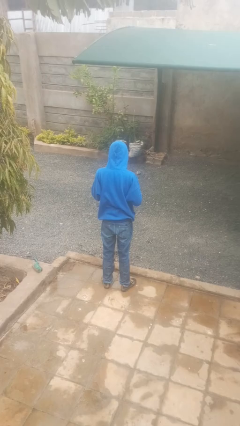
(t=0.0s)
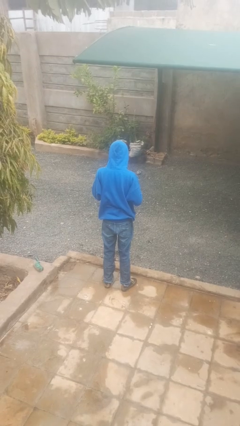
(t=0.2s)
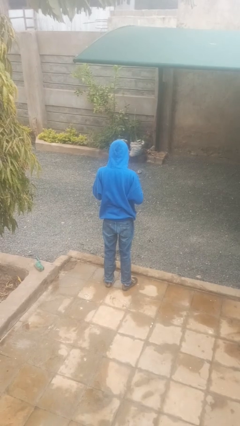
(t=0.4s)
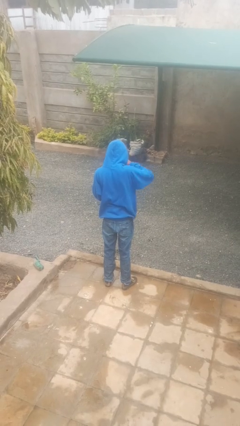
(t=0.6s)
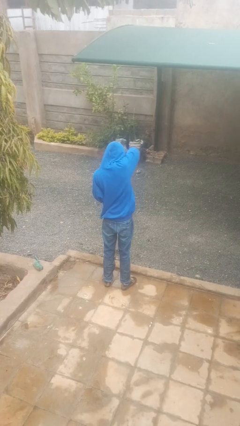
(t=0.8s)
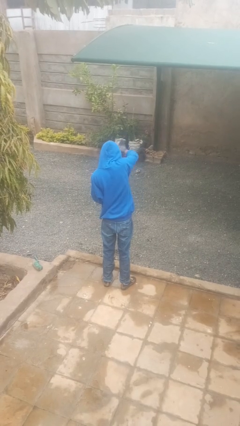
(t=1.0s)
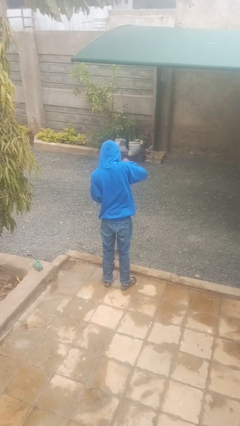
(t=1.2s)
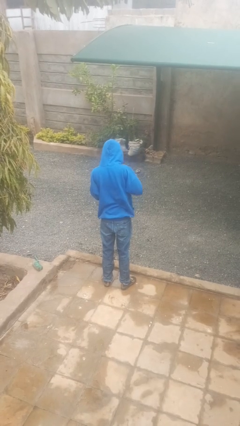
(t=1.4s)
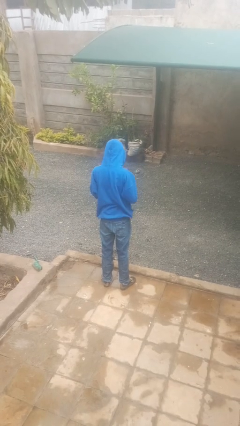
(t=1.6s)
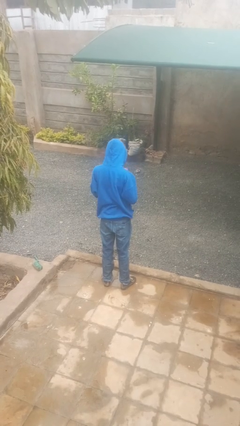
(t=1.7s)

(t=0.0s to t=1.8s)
person punches

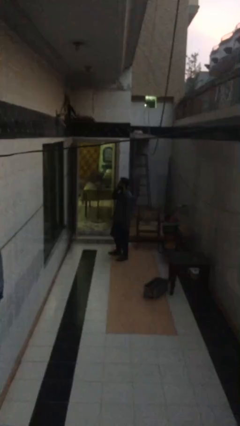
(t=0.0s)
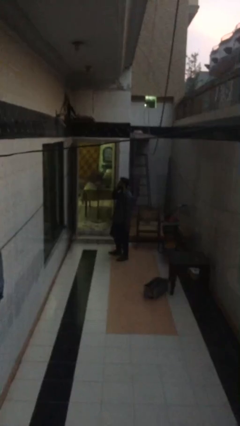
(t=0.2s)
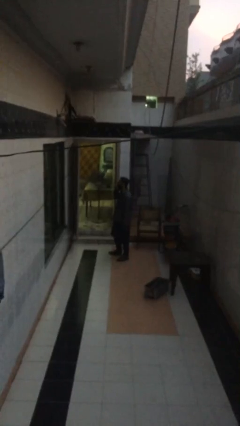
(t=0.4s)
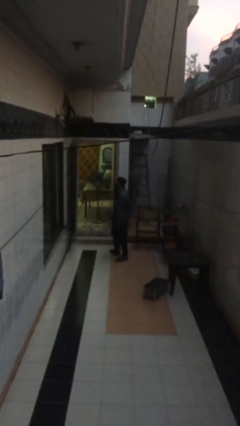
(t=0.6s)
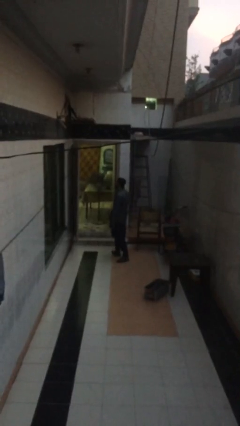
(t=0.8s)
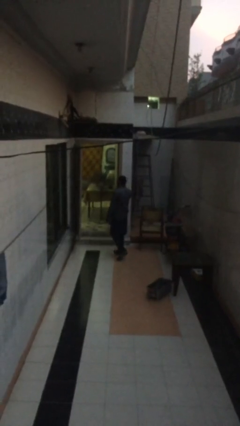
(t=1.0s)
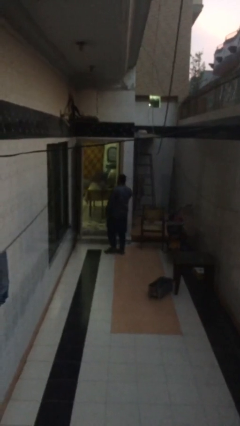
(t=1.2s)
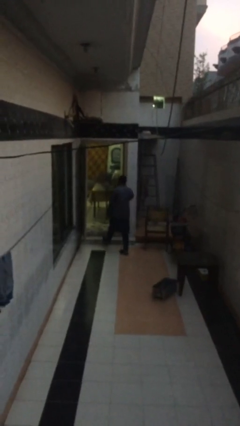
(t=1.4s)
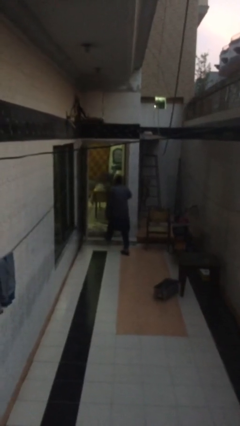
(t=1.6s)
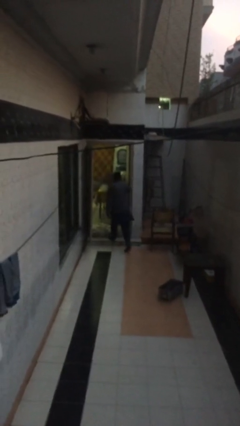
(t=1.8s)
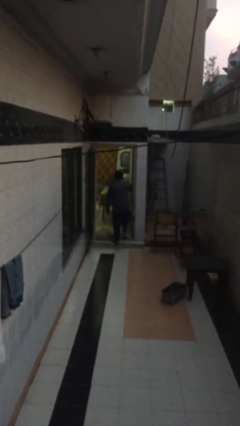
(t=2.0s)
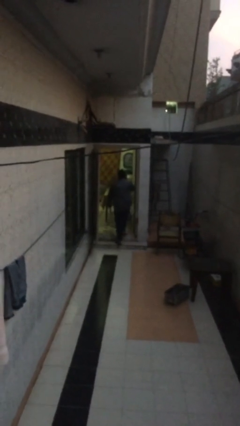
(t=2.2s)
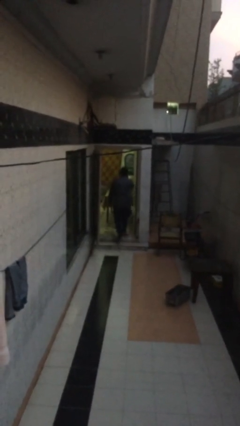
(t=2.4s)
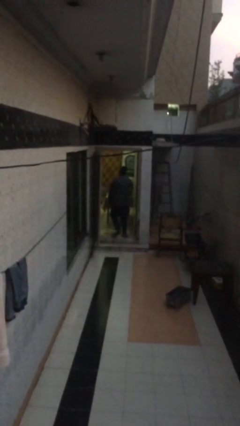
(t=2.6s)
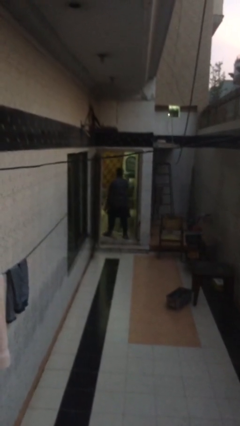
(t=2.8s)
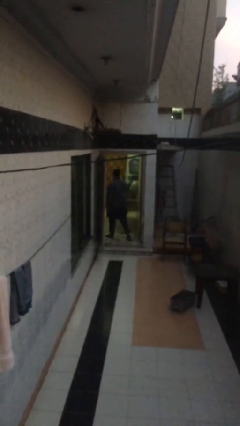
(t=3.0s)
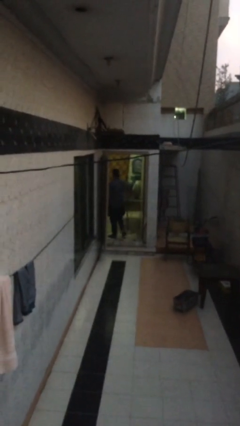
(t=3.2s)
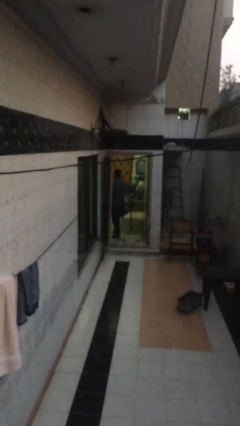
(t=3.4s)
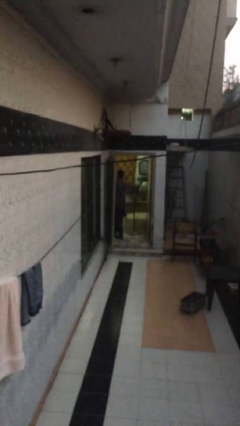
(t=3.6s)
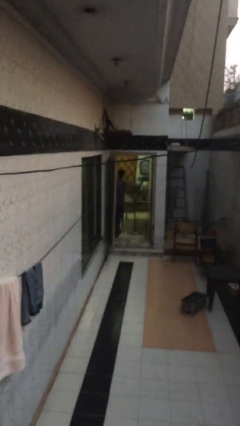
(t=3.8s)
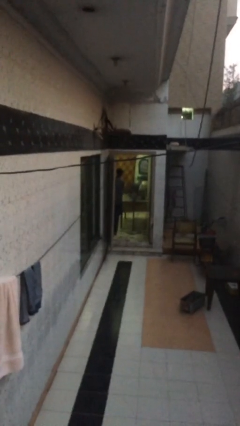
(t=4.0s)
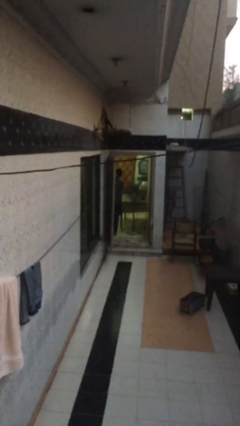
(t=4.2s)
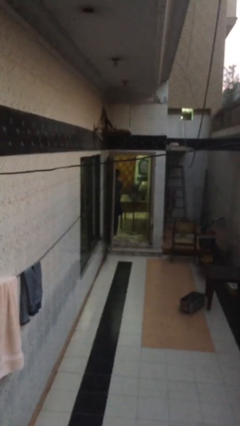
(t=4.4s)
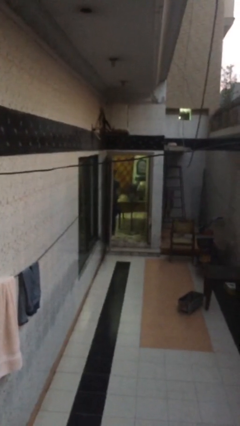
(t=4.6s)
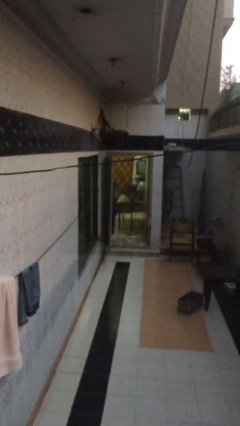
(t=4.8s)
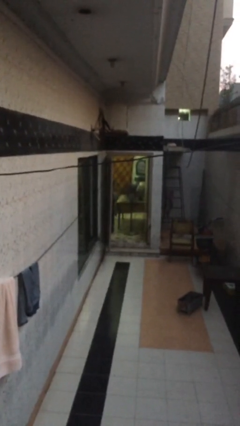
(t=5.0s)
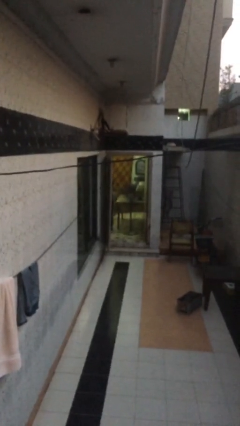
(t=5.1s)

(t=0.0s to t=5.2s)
person exits scene through structure

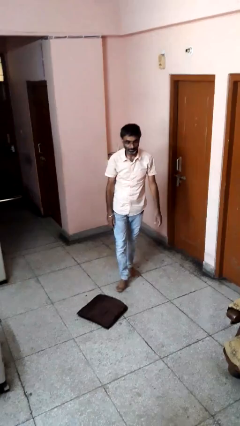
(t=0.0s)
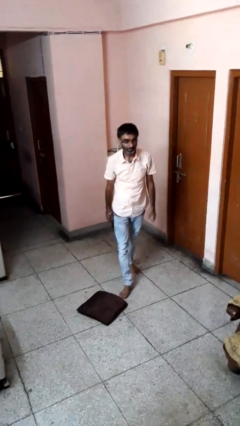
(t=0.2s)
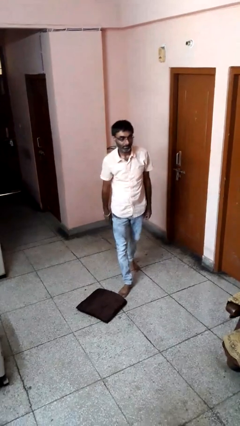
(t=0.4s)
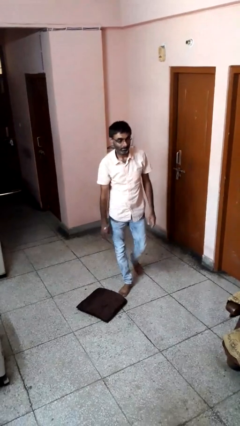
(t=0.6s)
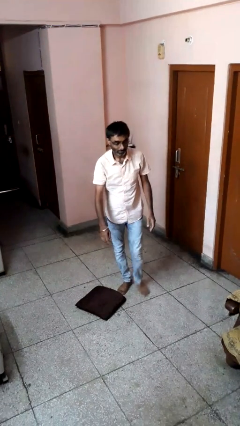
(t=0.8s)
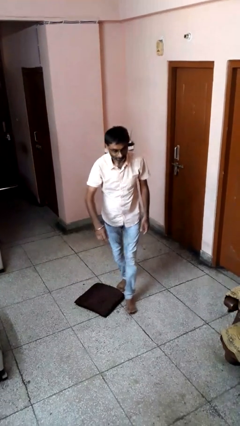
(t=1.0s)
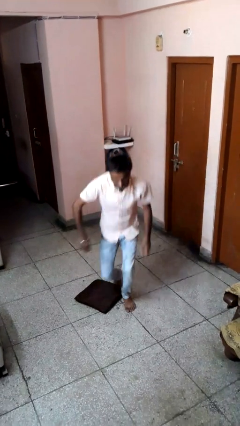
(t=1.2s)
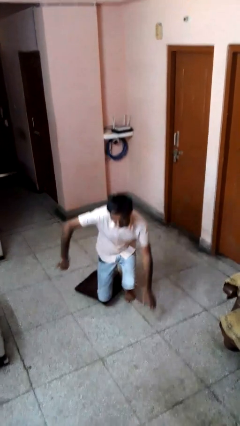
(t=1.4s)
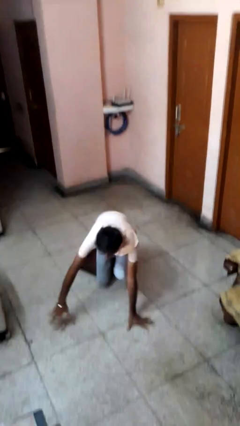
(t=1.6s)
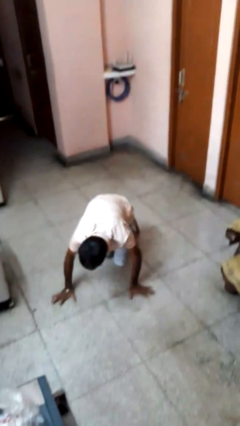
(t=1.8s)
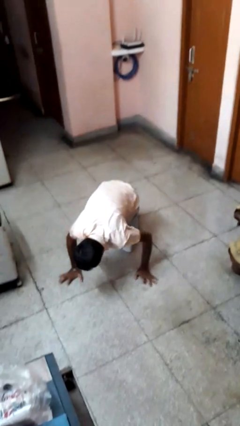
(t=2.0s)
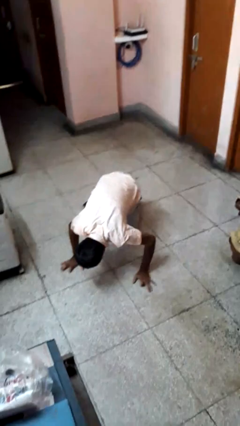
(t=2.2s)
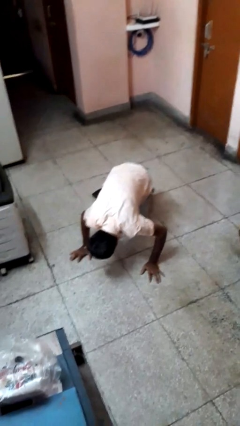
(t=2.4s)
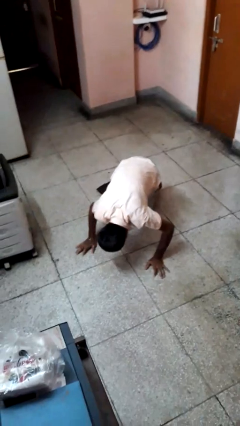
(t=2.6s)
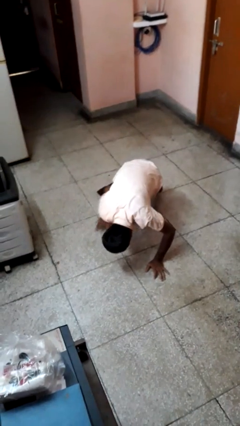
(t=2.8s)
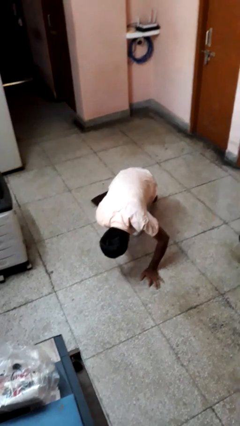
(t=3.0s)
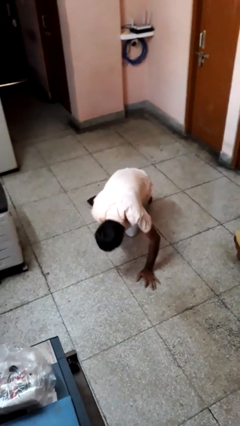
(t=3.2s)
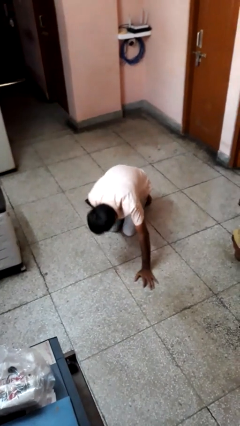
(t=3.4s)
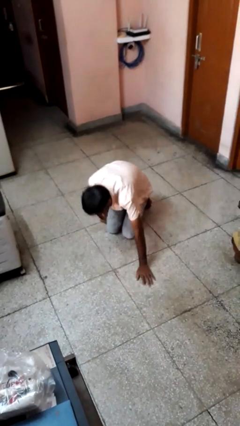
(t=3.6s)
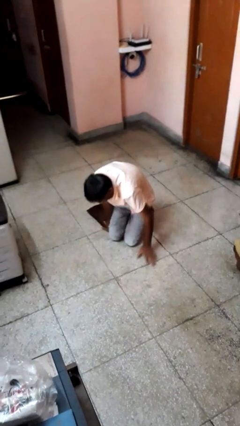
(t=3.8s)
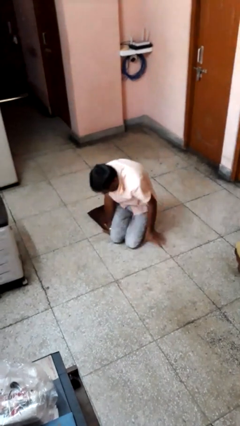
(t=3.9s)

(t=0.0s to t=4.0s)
person trips on object on floor

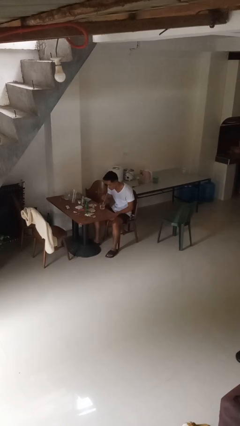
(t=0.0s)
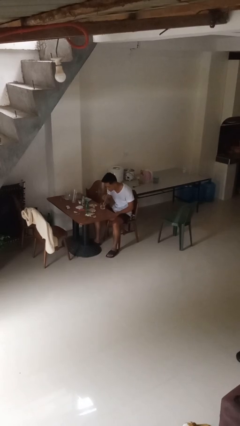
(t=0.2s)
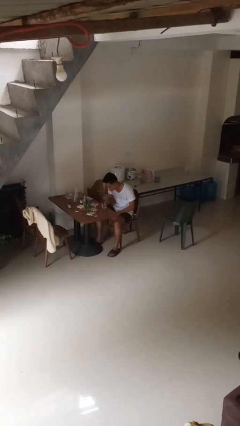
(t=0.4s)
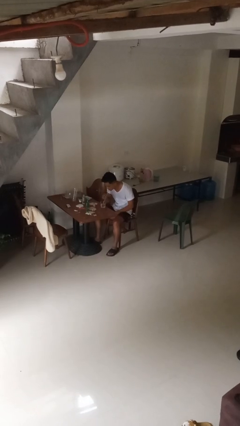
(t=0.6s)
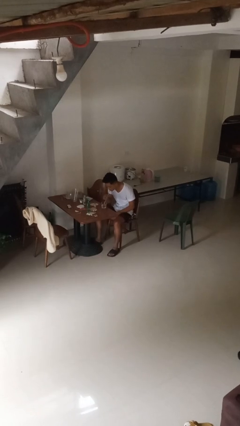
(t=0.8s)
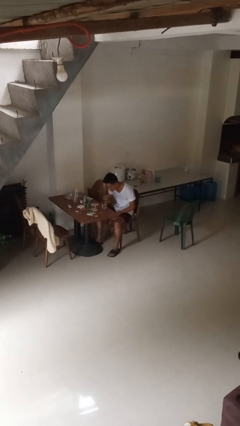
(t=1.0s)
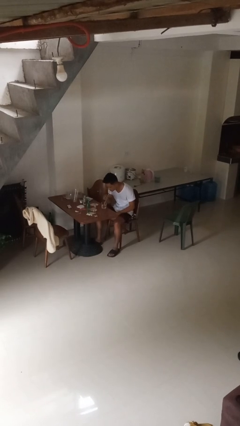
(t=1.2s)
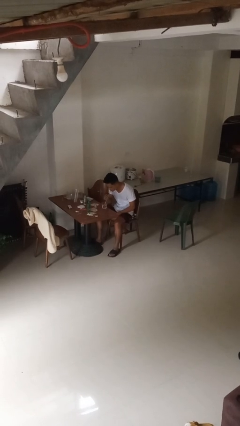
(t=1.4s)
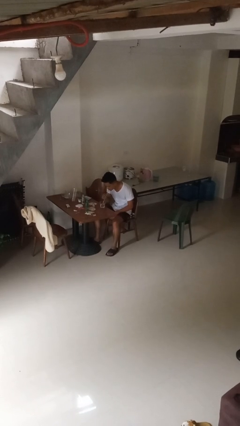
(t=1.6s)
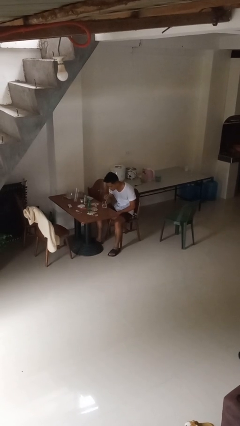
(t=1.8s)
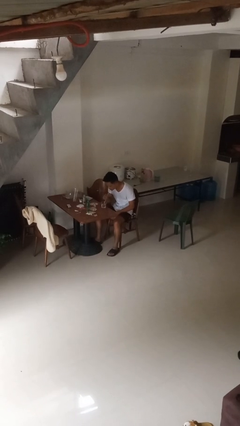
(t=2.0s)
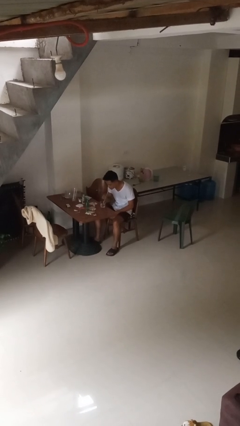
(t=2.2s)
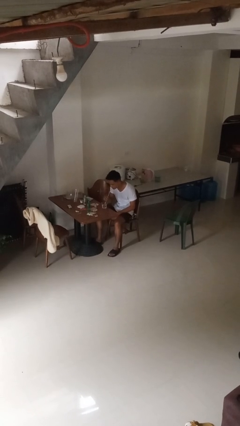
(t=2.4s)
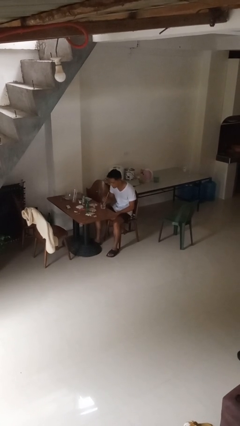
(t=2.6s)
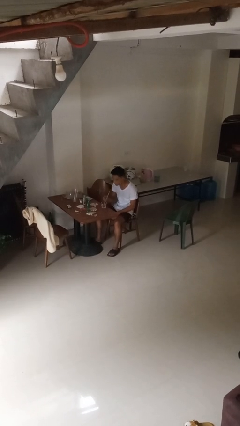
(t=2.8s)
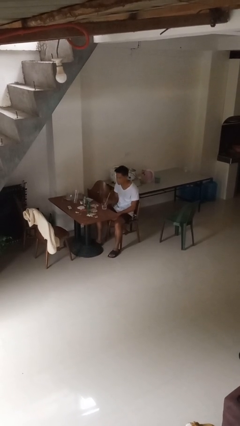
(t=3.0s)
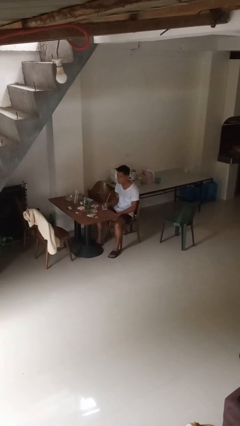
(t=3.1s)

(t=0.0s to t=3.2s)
person drinks from straw

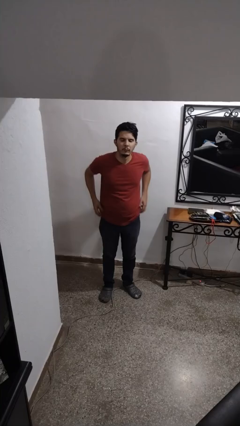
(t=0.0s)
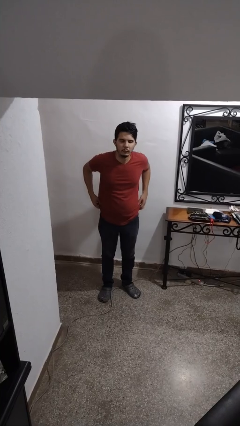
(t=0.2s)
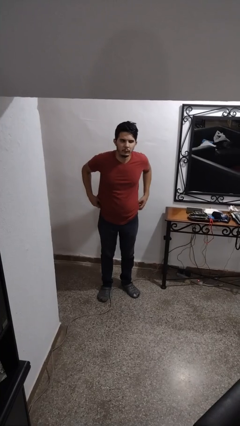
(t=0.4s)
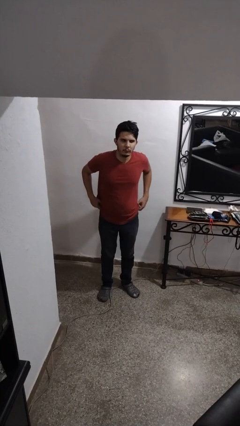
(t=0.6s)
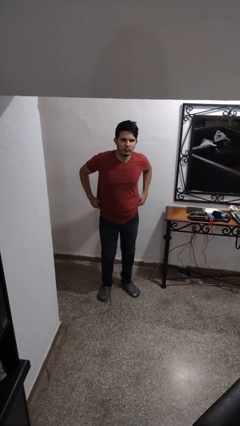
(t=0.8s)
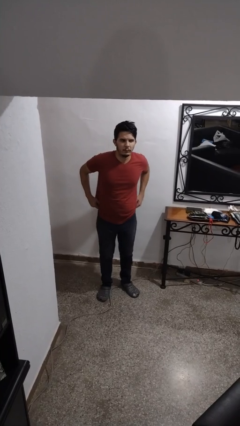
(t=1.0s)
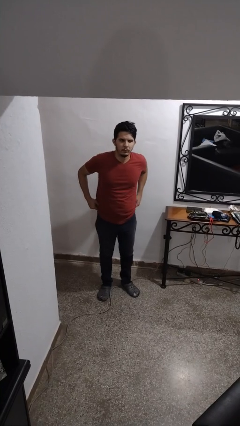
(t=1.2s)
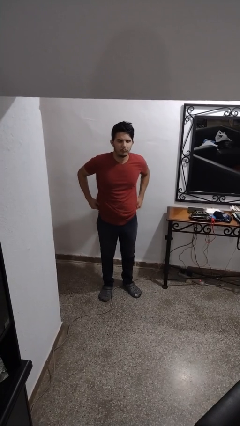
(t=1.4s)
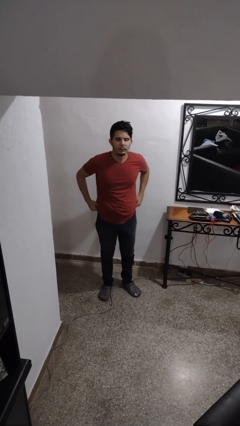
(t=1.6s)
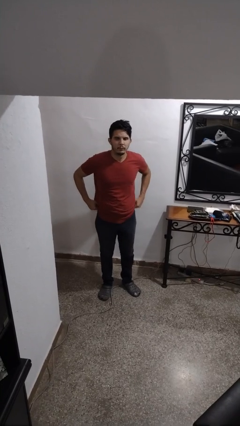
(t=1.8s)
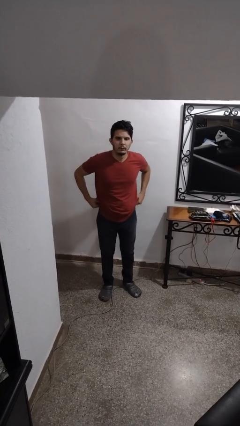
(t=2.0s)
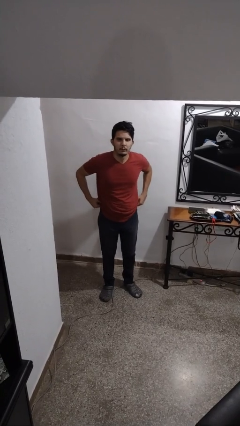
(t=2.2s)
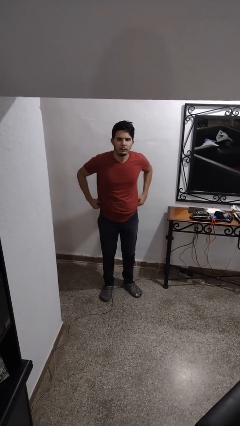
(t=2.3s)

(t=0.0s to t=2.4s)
person hikes up pants

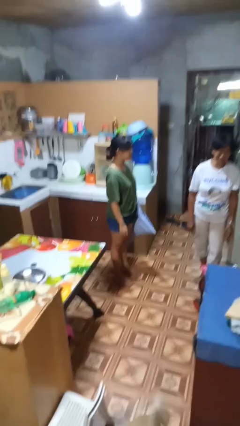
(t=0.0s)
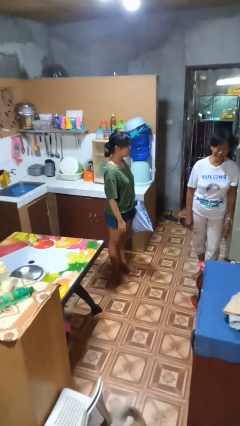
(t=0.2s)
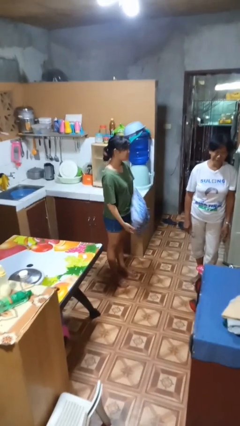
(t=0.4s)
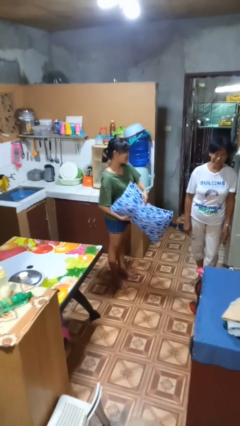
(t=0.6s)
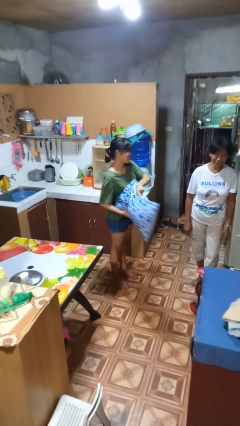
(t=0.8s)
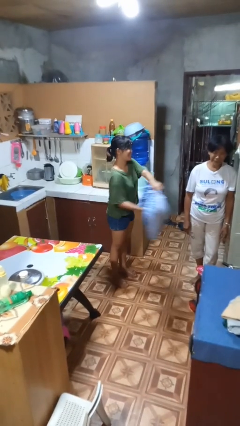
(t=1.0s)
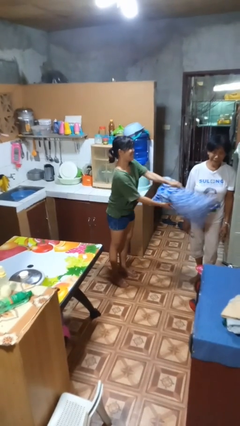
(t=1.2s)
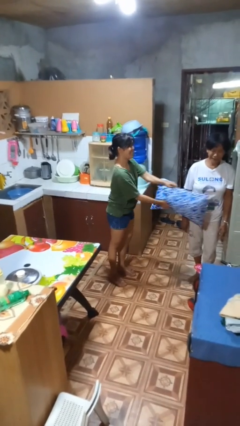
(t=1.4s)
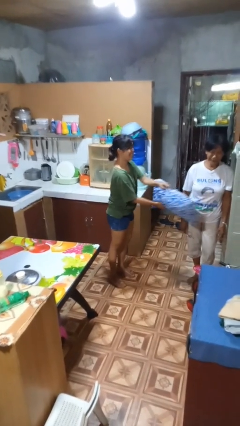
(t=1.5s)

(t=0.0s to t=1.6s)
person hits person with pillow
